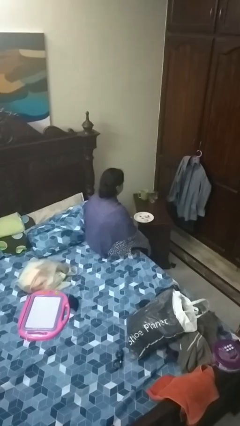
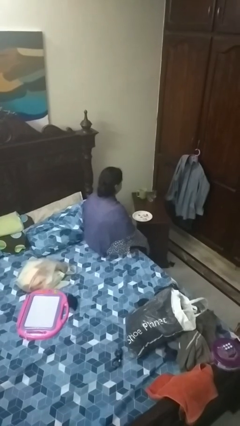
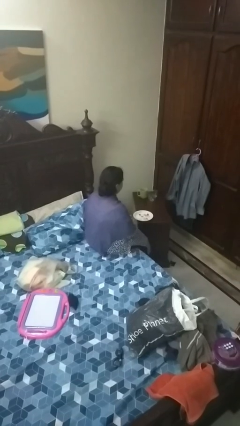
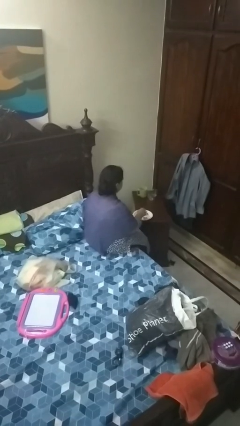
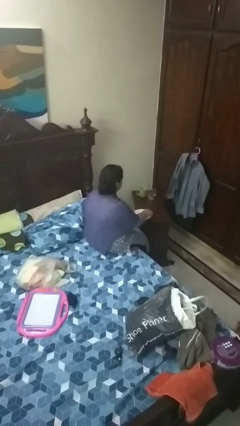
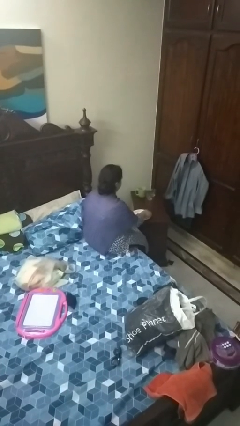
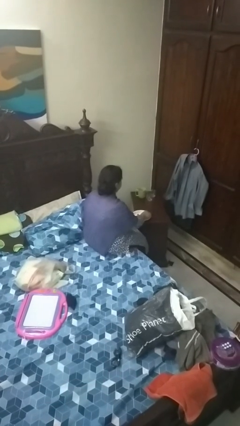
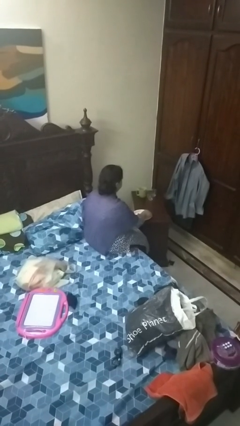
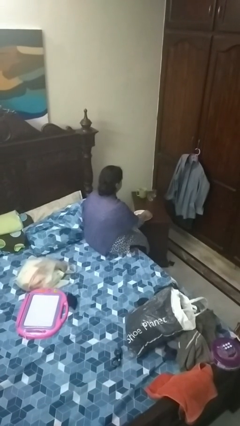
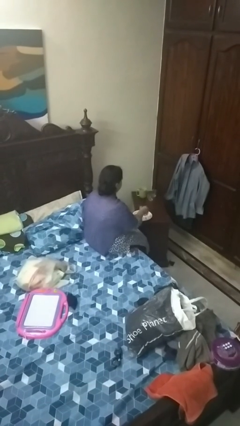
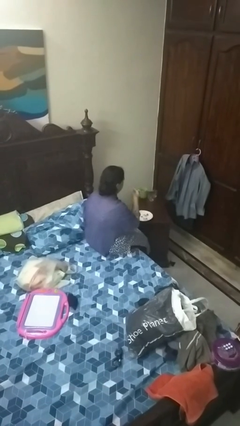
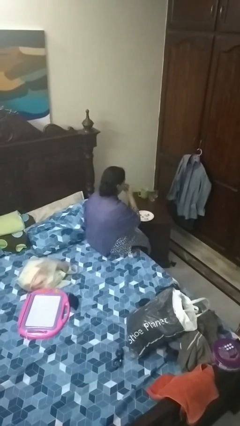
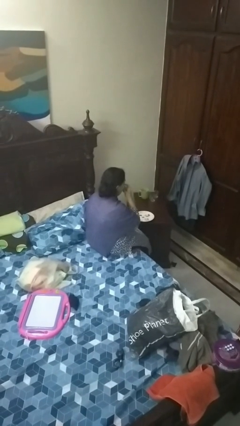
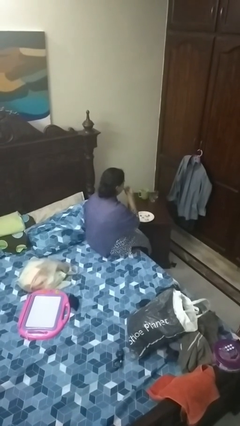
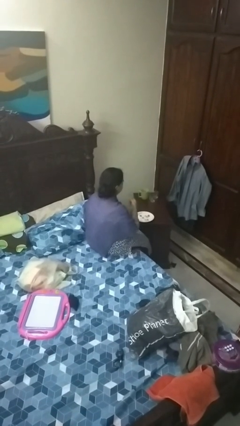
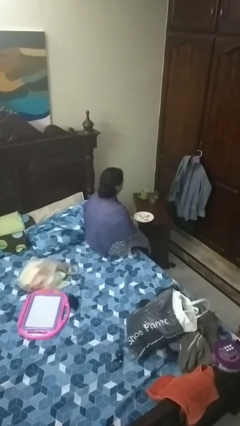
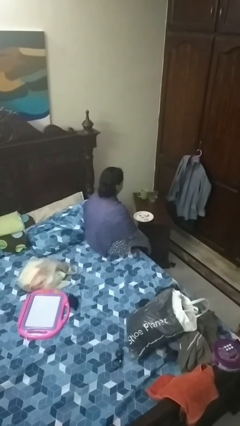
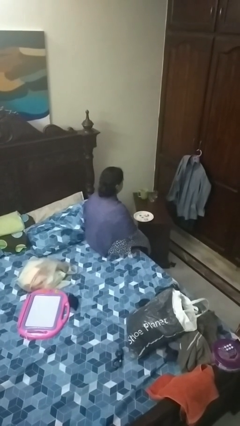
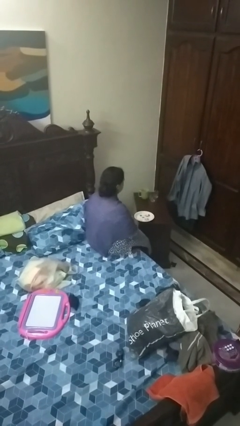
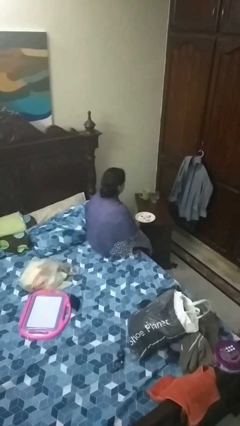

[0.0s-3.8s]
person eats with hands

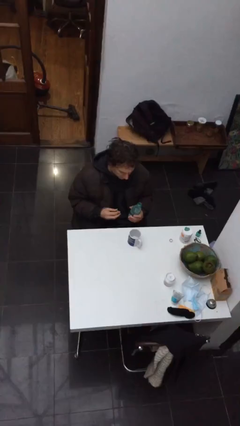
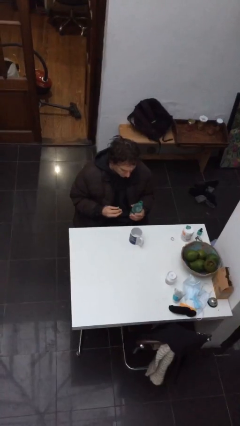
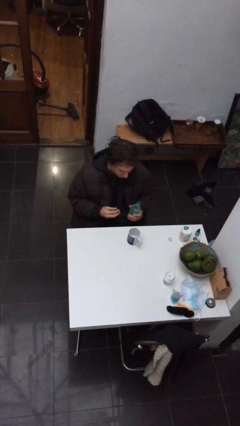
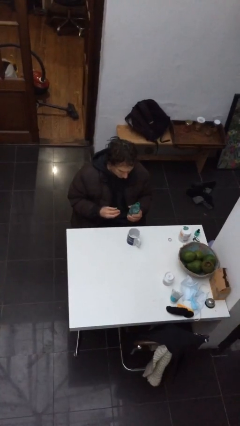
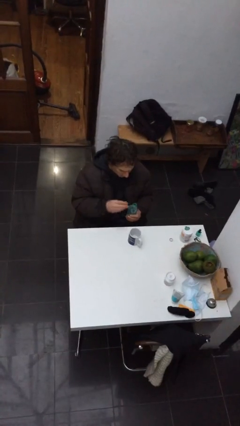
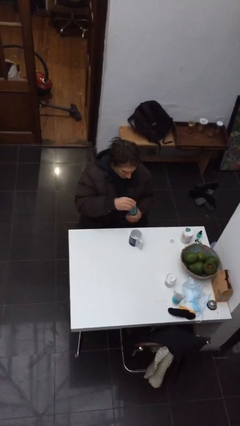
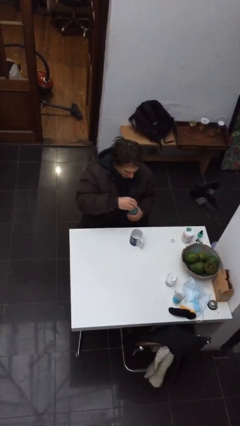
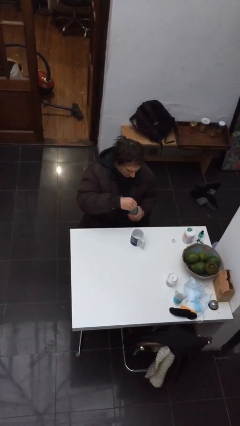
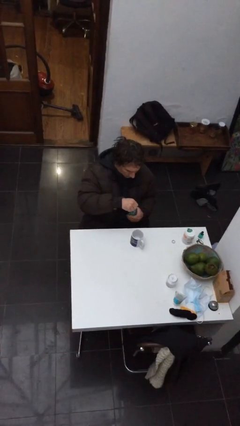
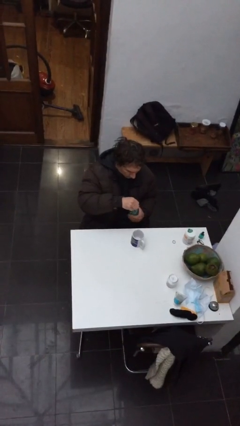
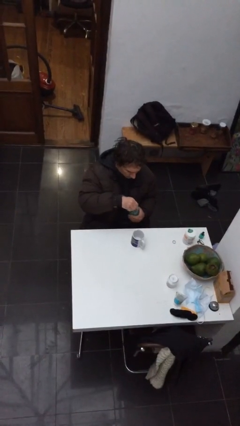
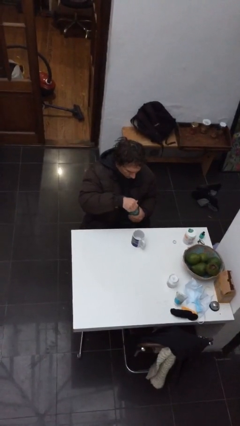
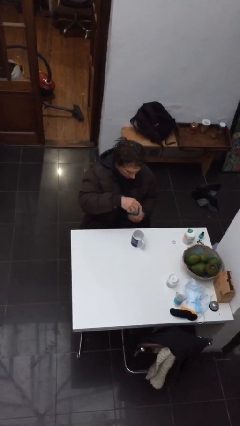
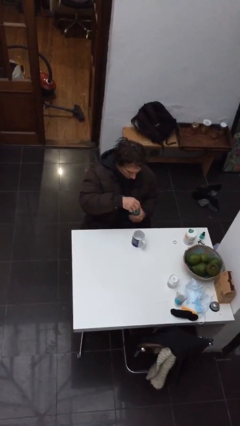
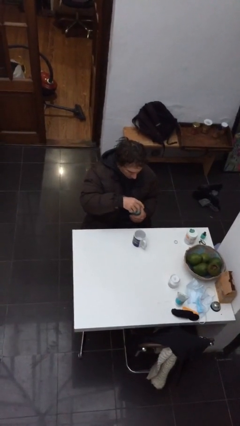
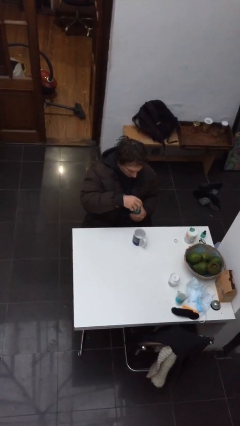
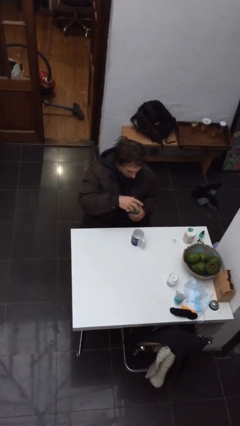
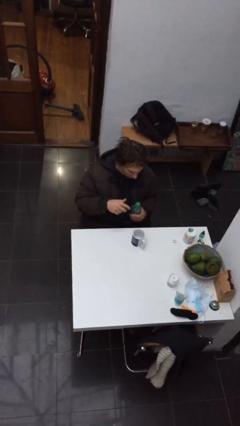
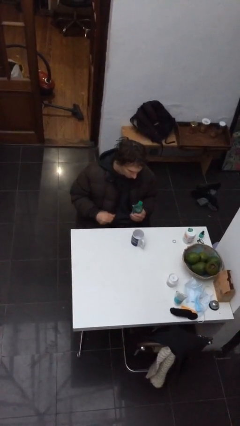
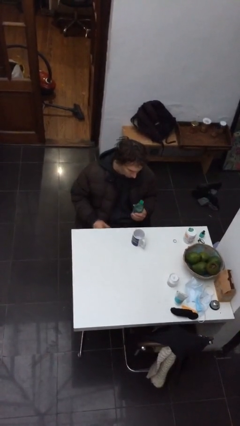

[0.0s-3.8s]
person screws lid to bottle

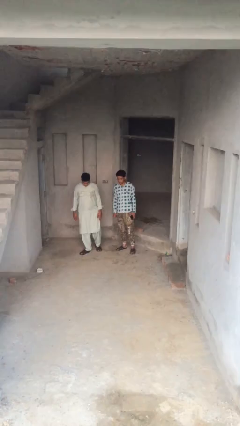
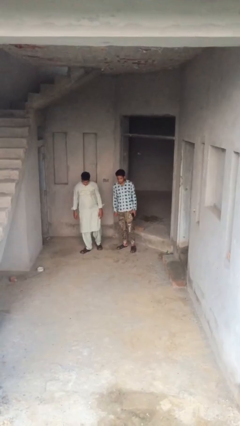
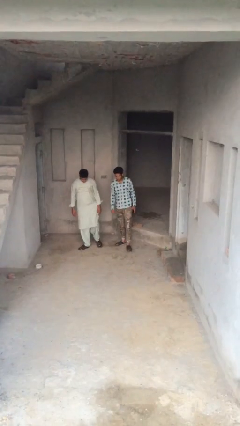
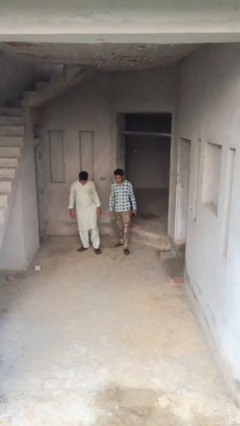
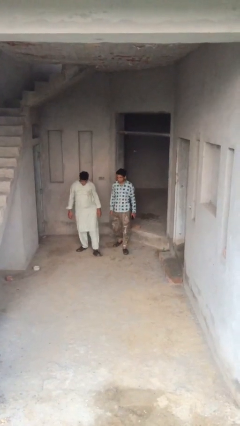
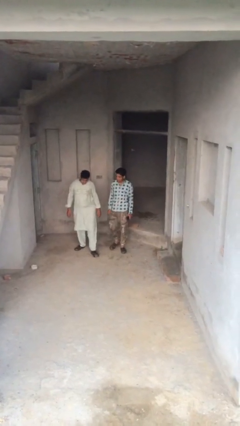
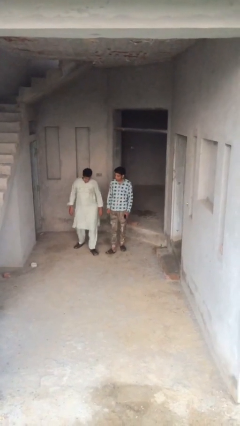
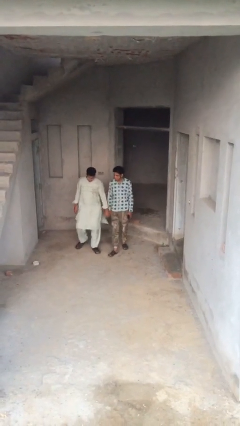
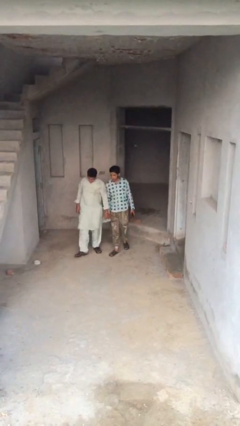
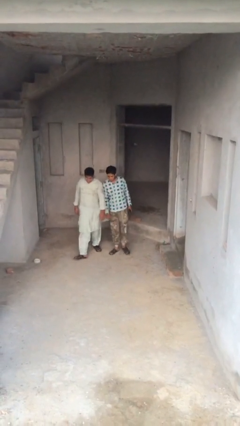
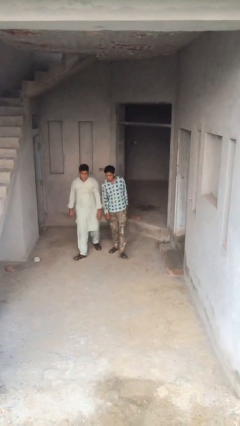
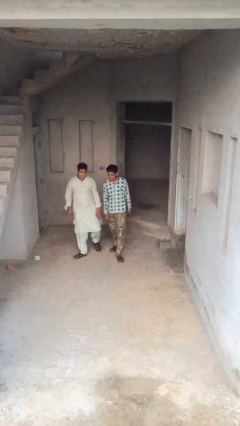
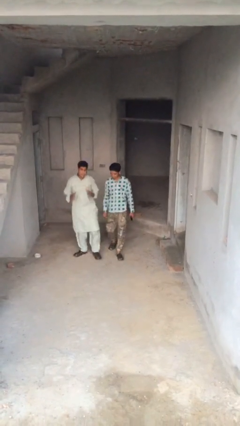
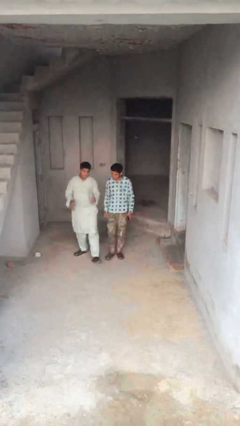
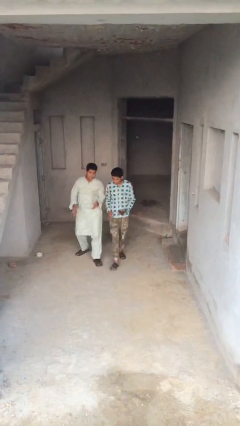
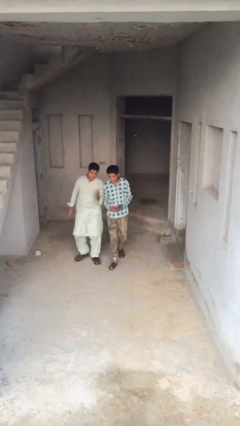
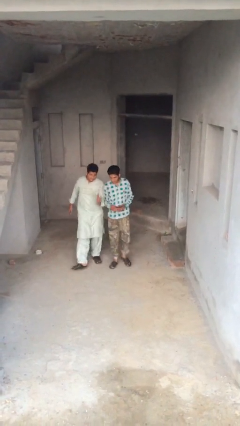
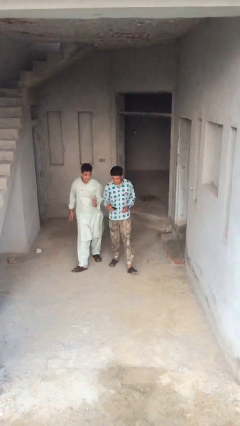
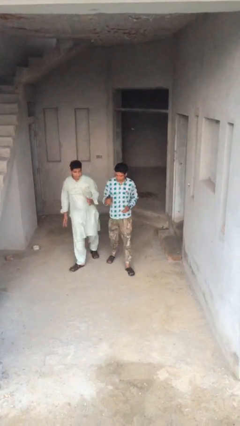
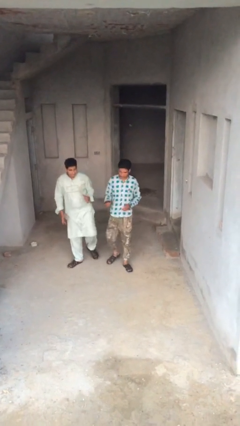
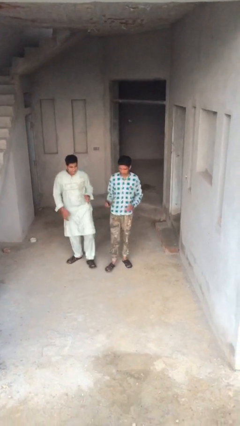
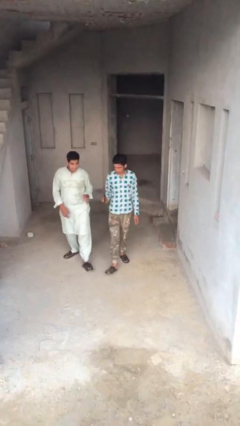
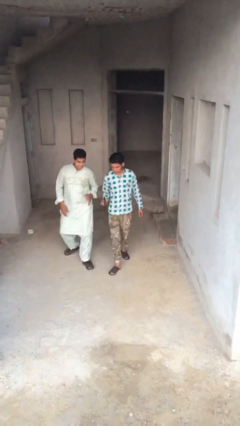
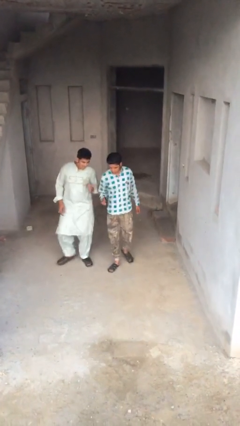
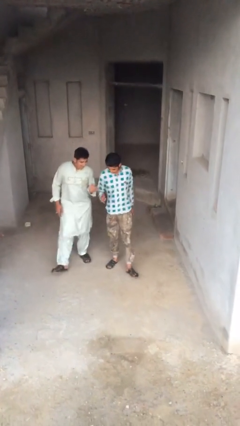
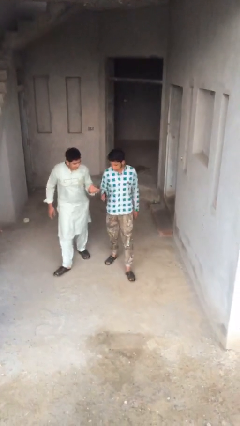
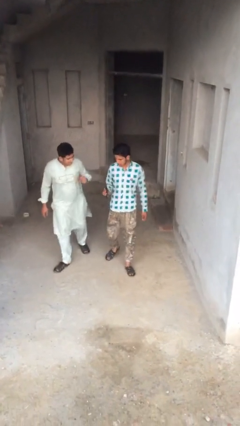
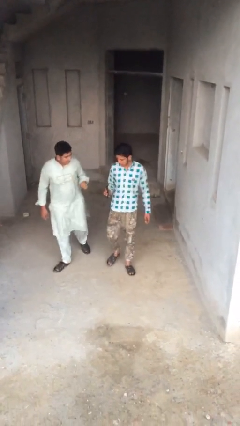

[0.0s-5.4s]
person talks to person

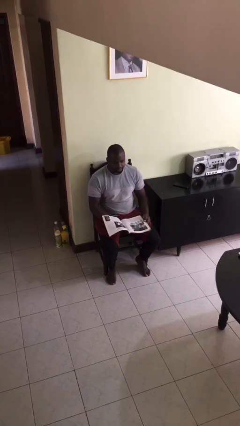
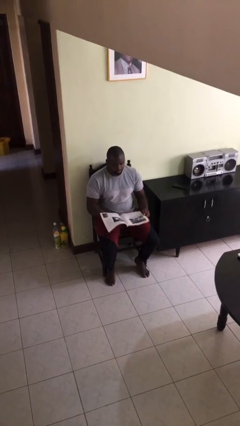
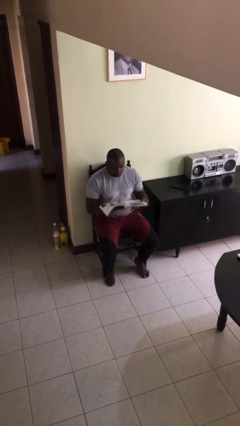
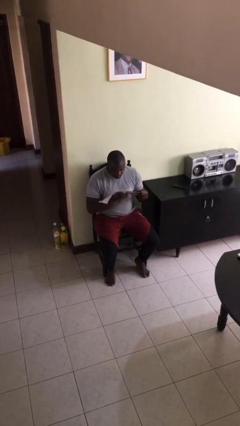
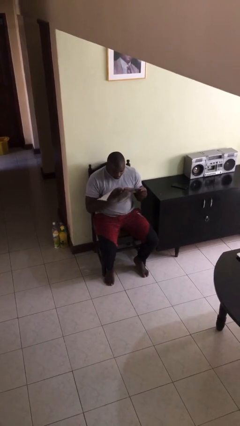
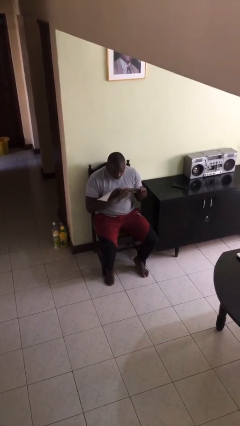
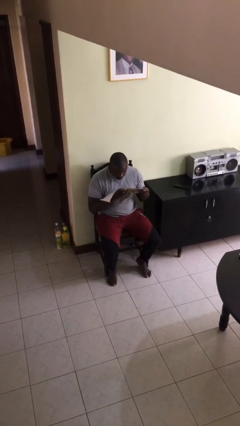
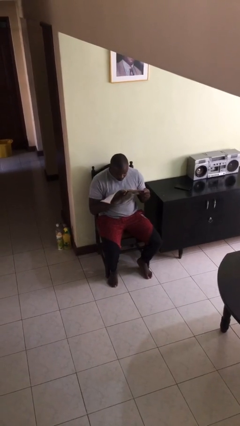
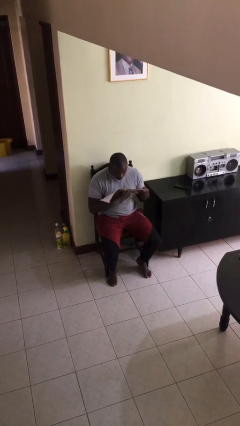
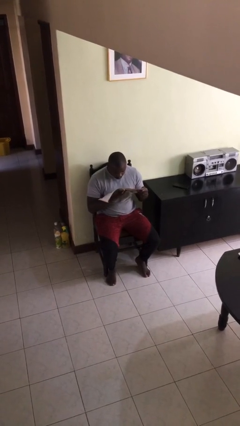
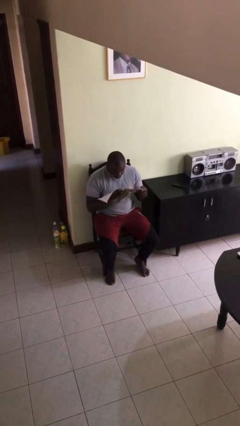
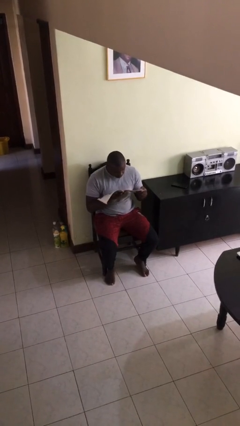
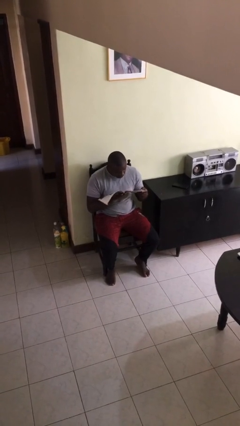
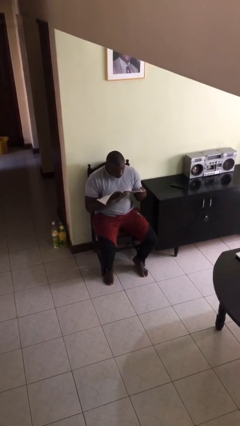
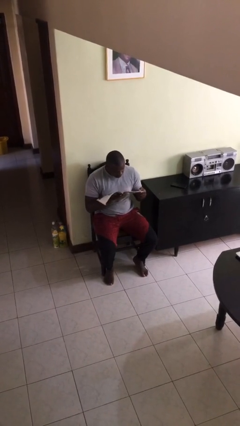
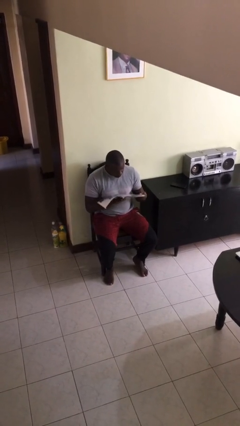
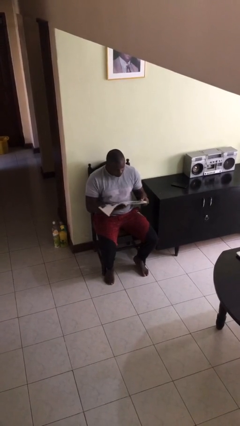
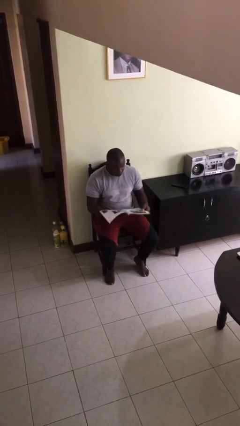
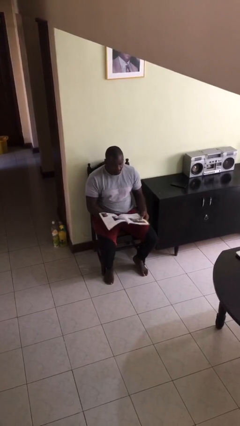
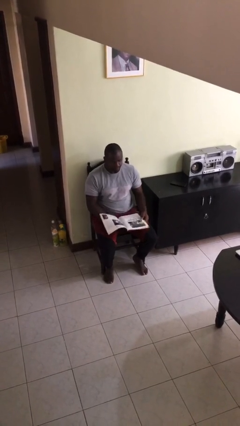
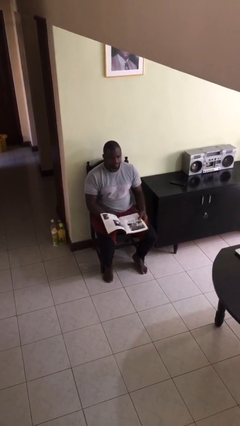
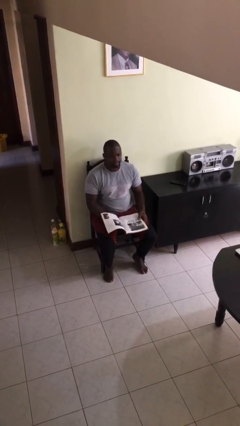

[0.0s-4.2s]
person reads document

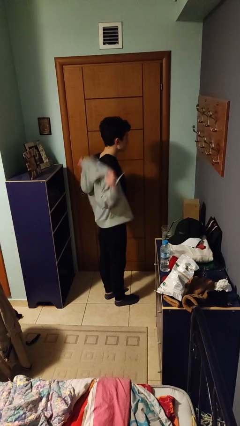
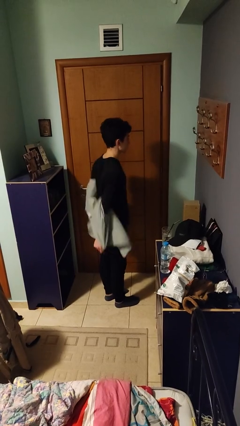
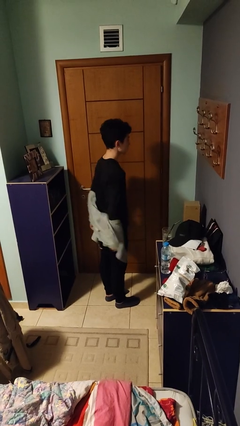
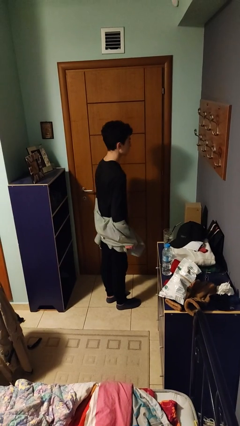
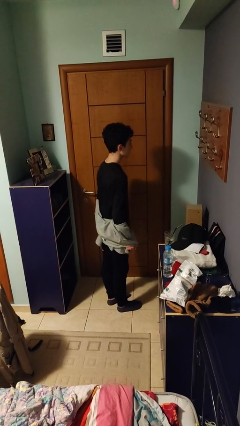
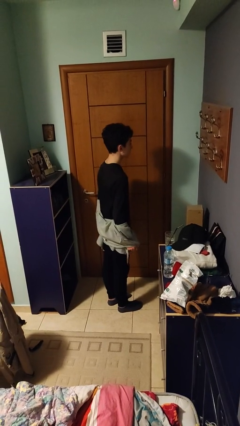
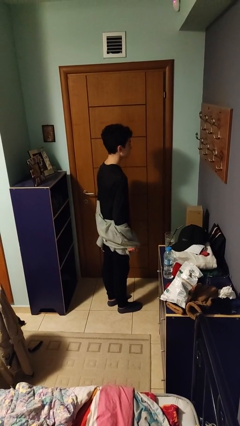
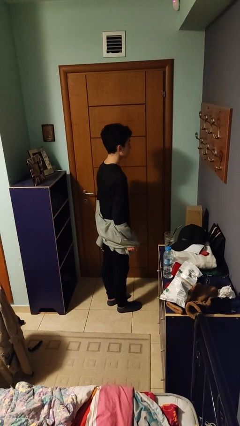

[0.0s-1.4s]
person takes off jacket
